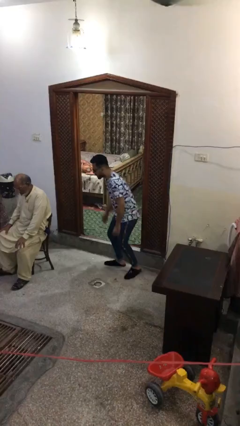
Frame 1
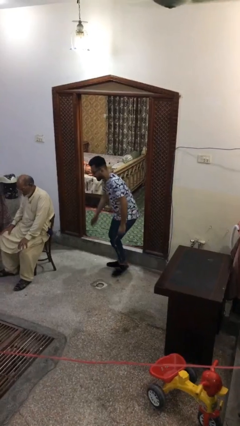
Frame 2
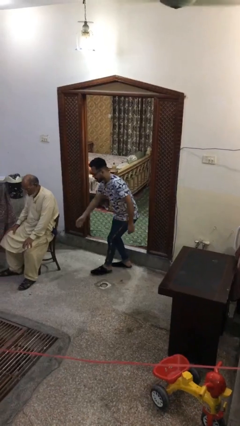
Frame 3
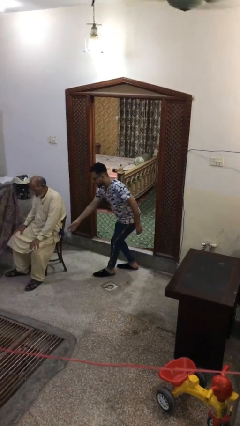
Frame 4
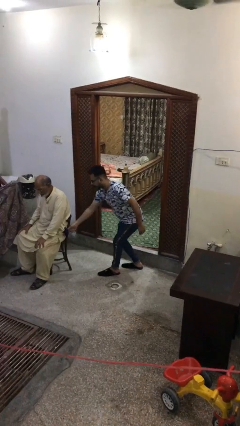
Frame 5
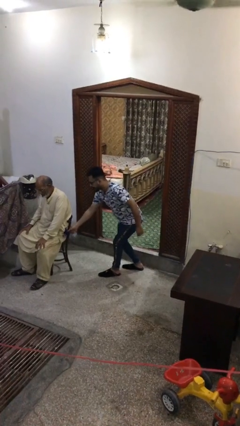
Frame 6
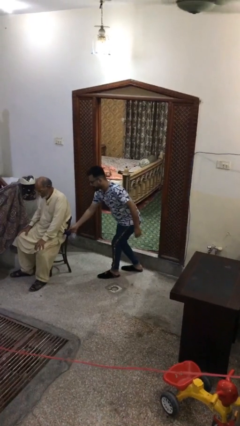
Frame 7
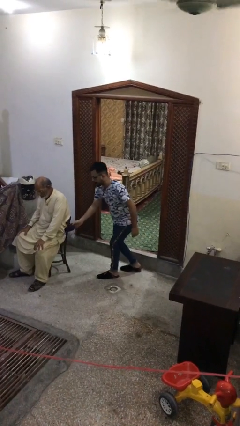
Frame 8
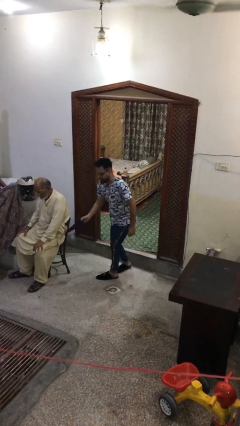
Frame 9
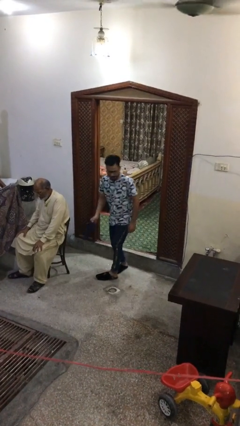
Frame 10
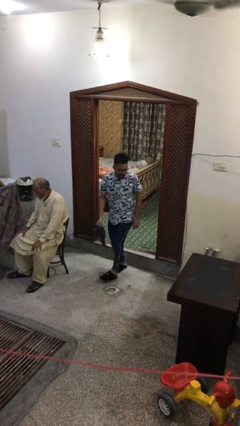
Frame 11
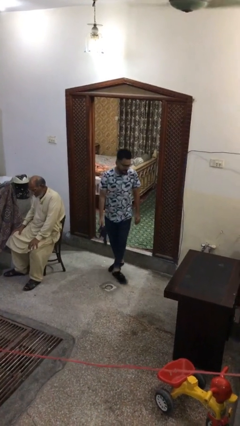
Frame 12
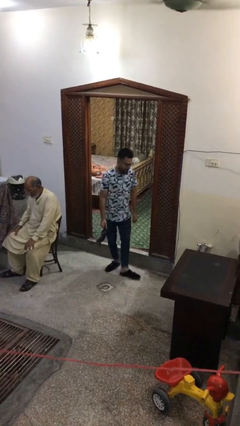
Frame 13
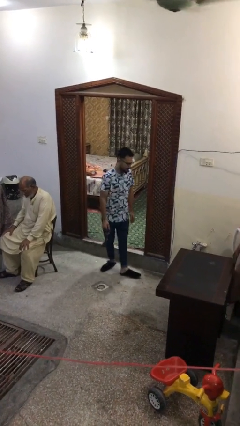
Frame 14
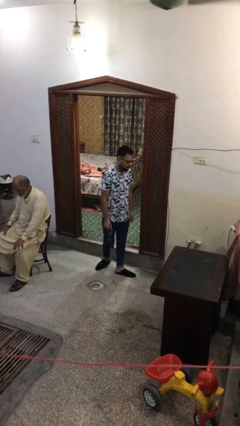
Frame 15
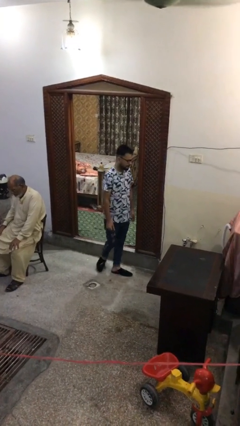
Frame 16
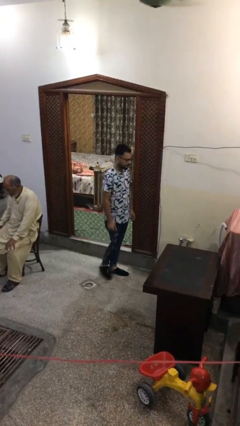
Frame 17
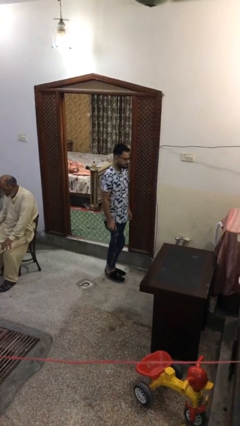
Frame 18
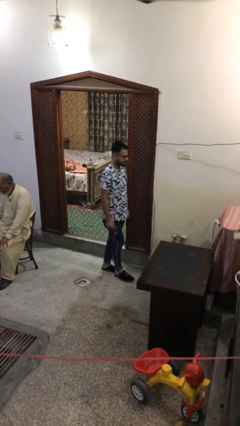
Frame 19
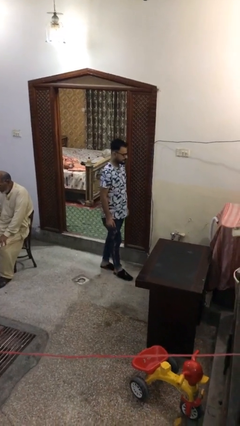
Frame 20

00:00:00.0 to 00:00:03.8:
person steals object from person

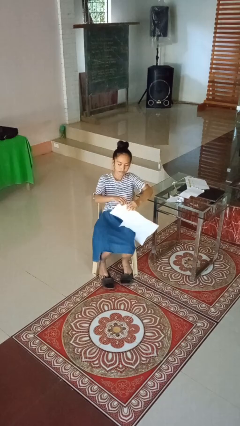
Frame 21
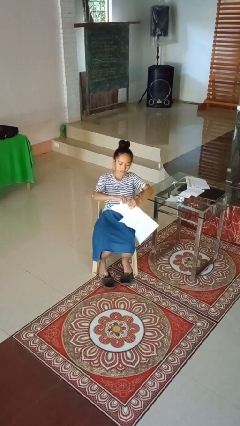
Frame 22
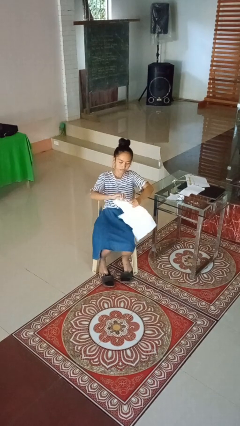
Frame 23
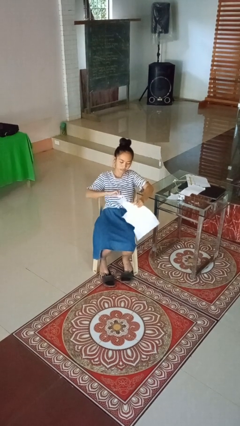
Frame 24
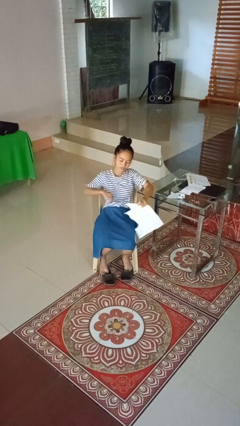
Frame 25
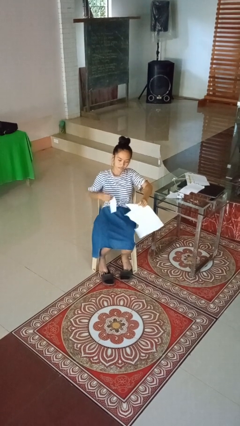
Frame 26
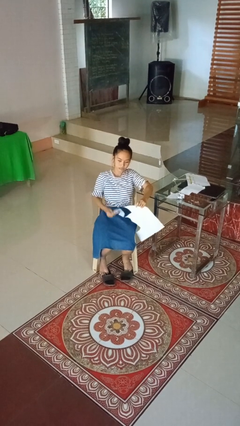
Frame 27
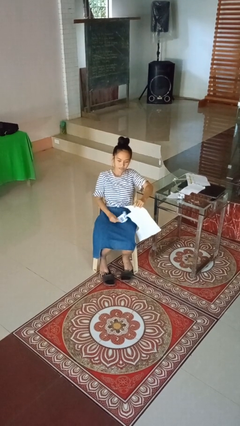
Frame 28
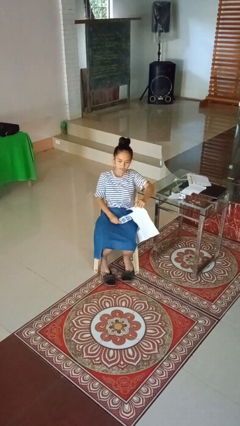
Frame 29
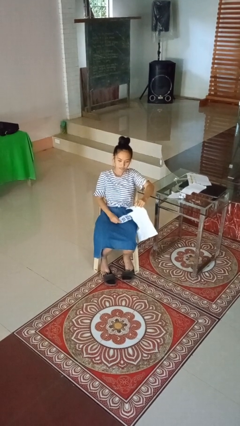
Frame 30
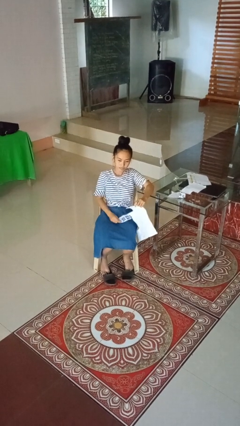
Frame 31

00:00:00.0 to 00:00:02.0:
person tears paper

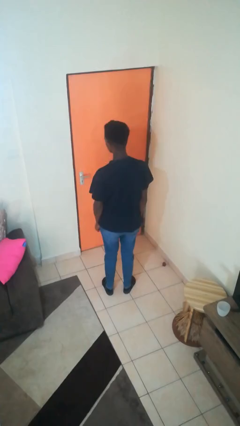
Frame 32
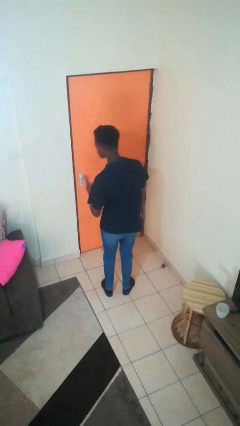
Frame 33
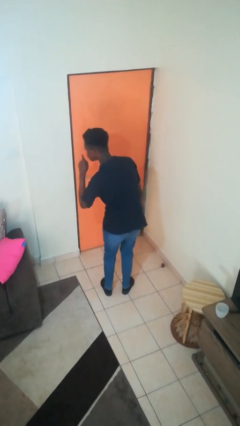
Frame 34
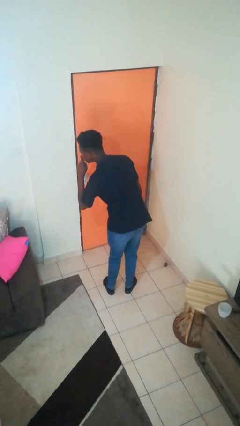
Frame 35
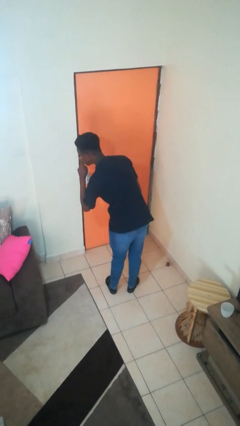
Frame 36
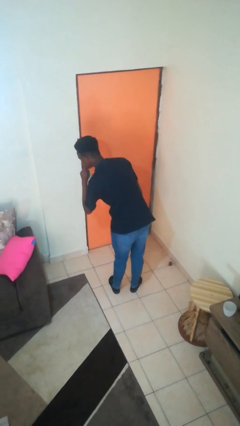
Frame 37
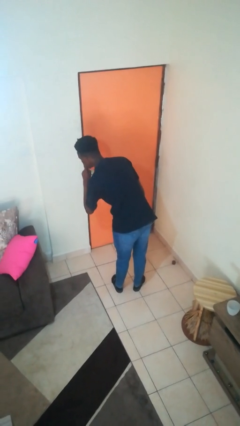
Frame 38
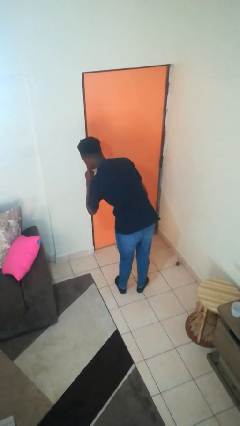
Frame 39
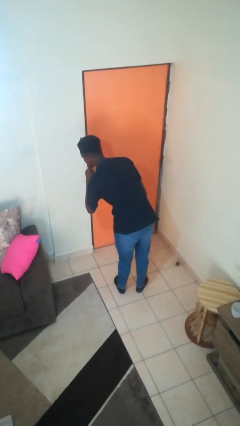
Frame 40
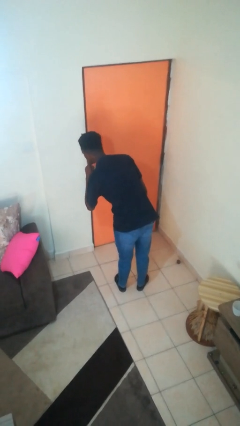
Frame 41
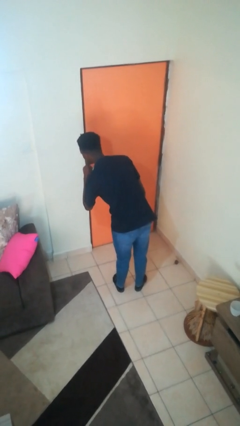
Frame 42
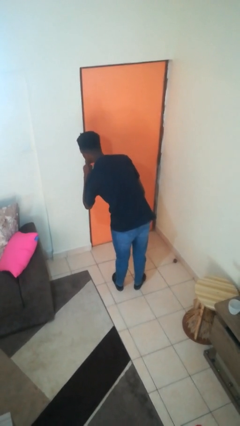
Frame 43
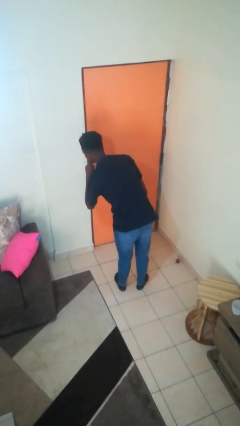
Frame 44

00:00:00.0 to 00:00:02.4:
person gestures be quiet

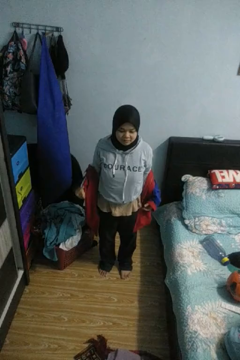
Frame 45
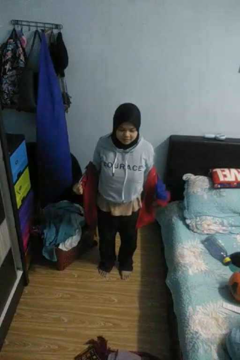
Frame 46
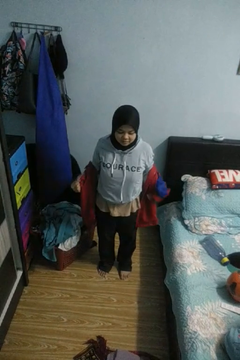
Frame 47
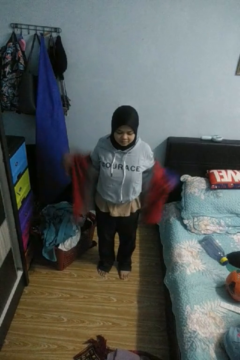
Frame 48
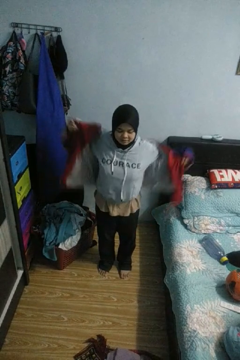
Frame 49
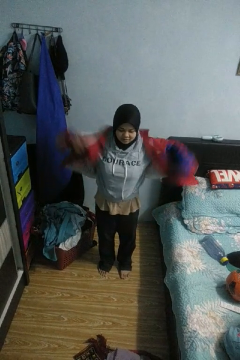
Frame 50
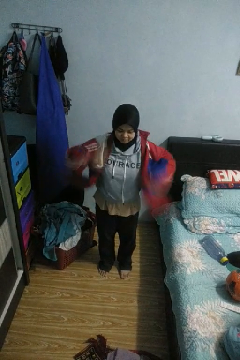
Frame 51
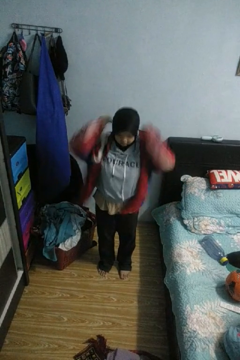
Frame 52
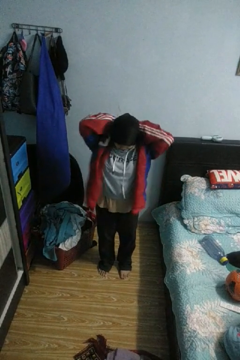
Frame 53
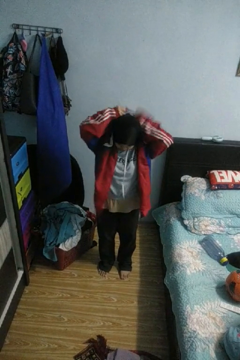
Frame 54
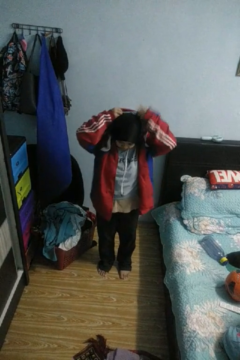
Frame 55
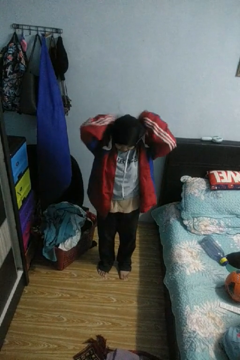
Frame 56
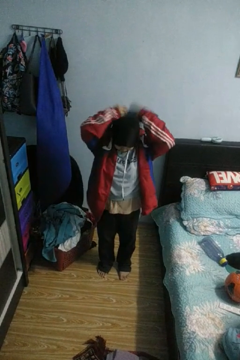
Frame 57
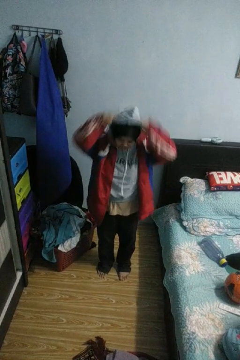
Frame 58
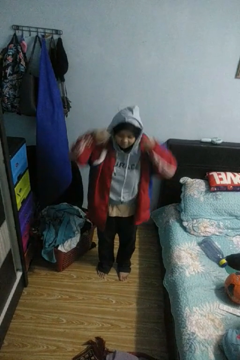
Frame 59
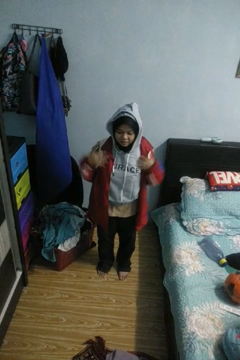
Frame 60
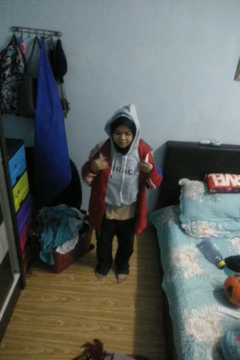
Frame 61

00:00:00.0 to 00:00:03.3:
person puts on hoodie

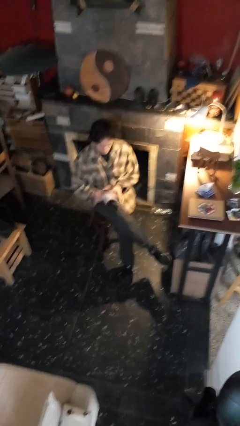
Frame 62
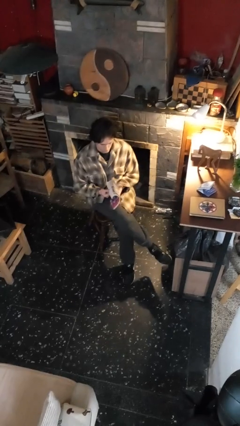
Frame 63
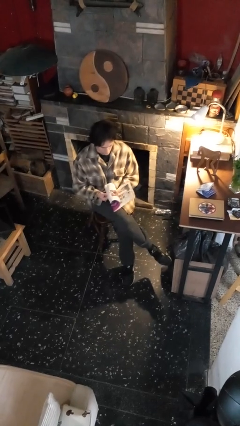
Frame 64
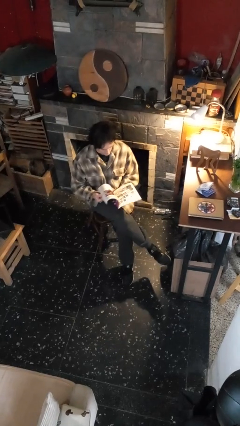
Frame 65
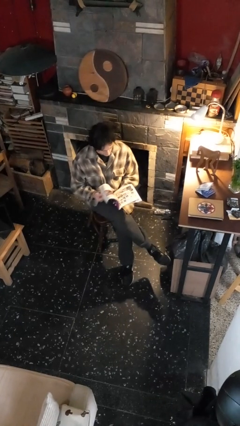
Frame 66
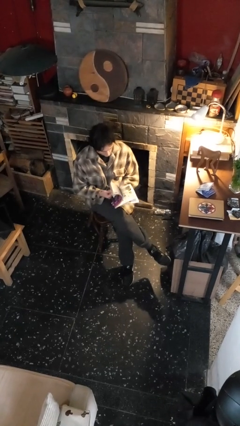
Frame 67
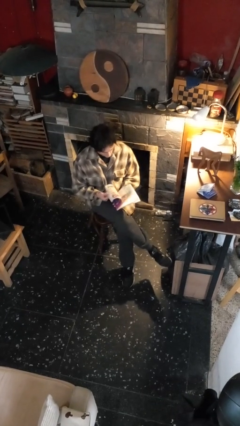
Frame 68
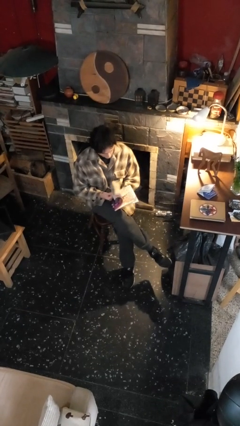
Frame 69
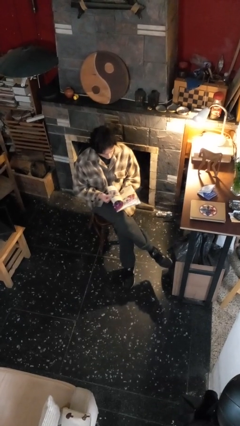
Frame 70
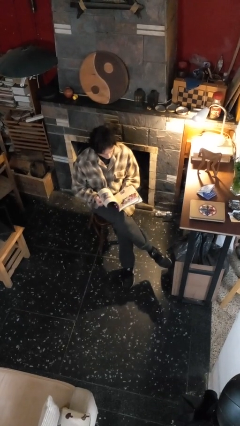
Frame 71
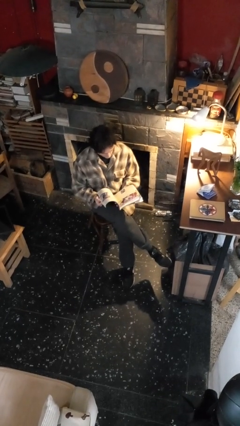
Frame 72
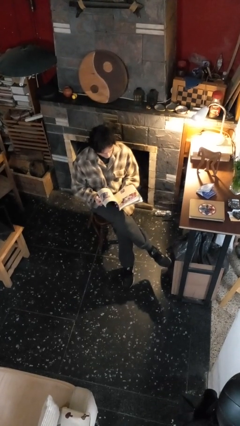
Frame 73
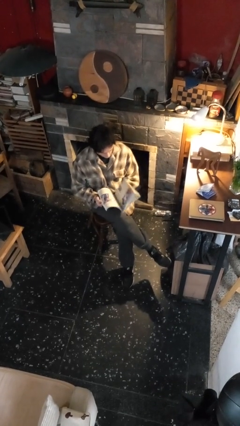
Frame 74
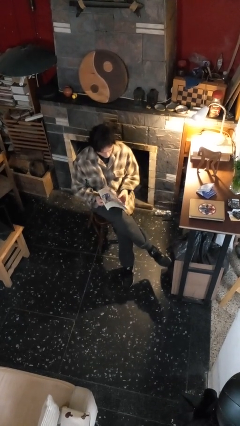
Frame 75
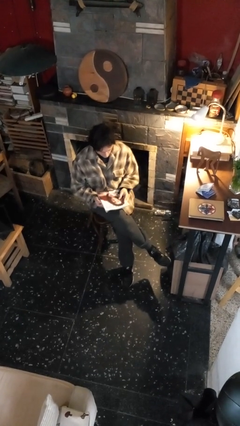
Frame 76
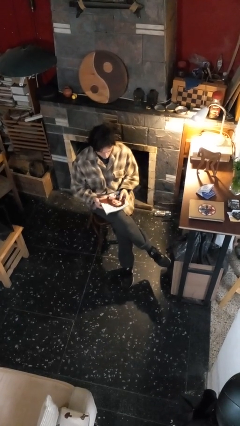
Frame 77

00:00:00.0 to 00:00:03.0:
person reads magazine

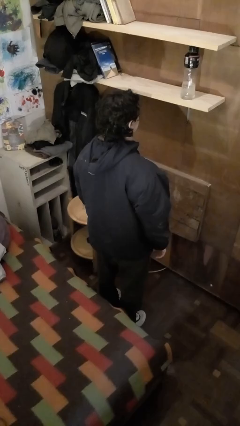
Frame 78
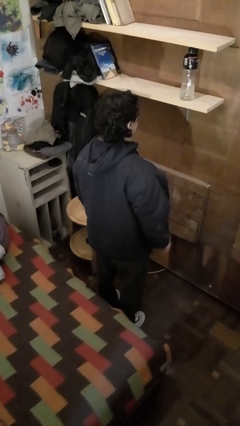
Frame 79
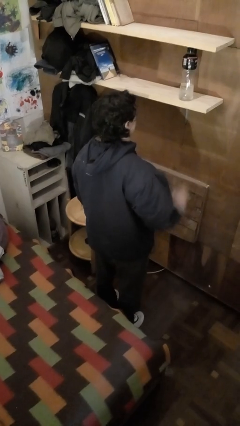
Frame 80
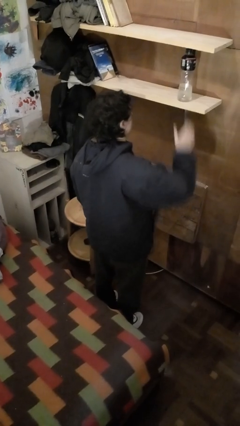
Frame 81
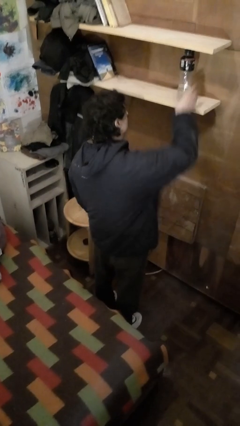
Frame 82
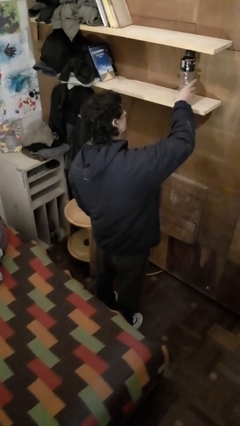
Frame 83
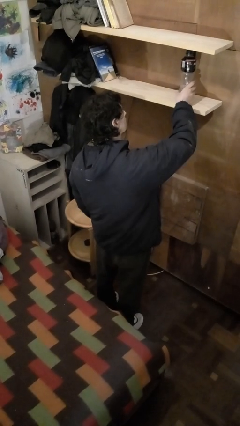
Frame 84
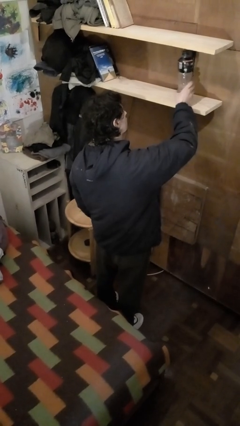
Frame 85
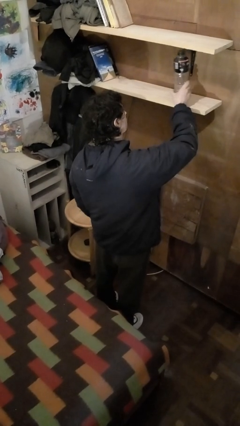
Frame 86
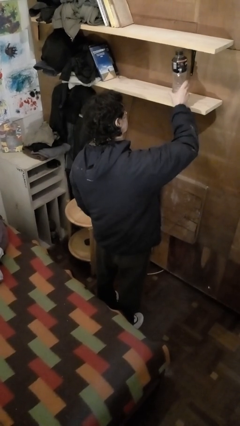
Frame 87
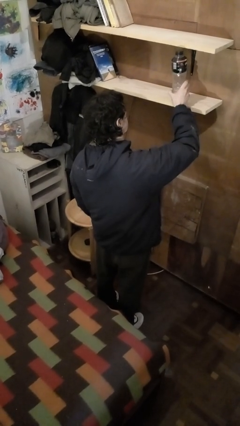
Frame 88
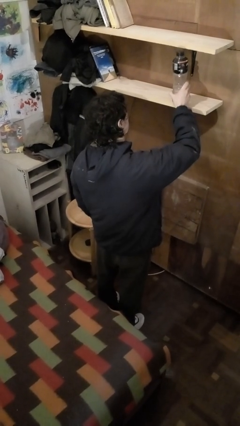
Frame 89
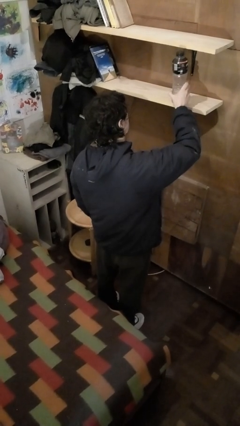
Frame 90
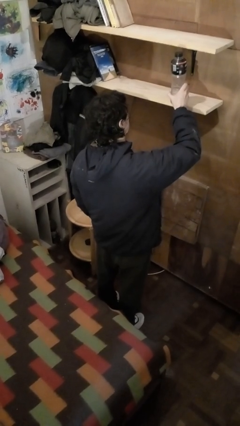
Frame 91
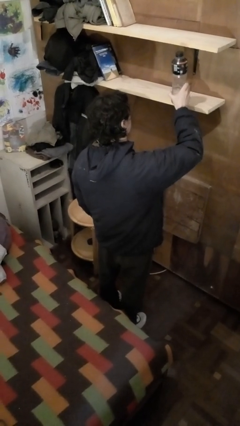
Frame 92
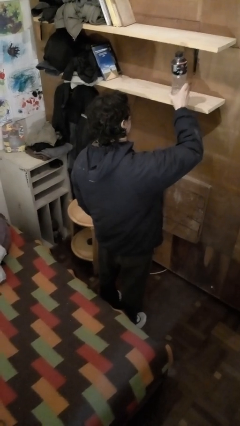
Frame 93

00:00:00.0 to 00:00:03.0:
person picks up object from shelf

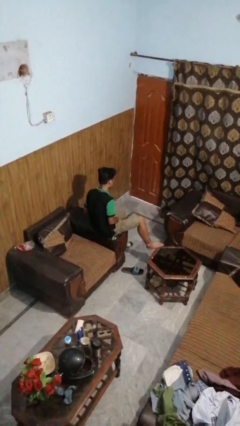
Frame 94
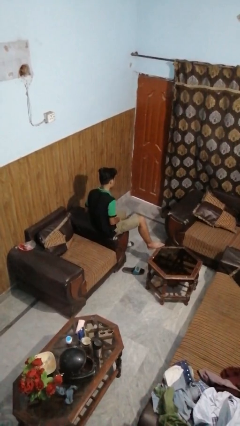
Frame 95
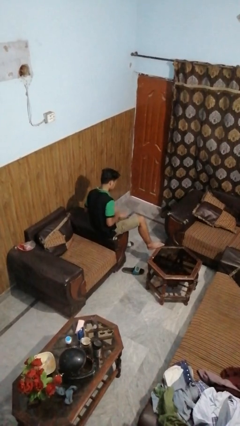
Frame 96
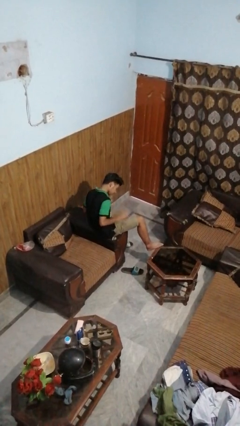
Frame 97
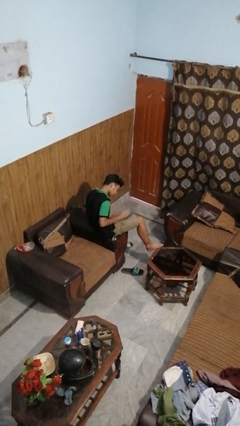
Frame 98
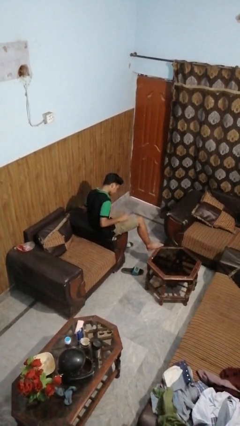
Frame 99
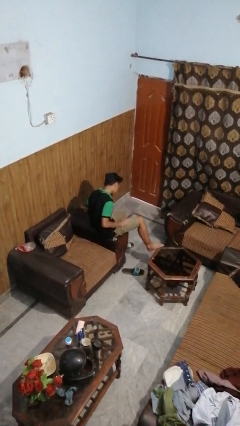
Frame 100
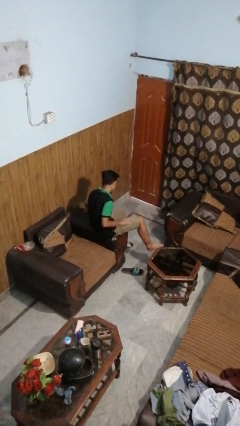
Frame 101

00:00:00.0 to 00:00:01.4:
person slaps hands on thighs
